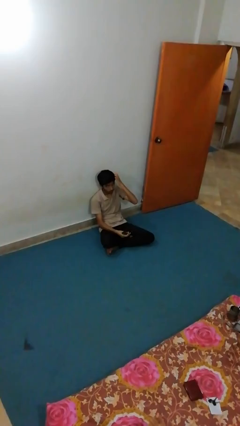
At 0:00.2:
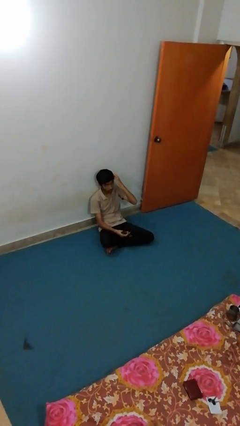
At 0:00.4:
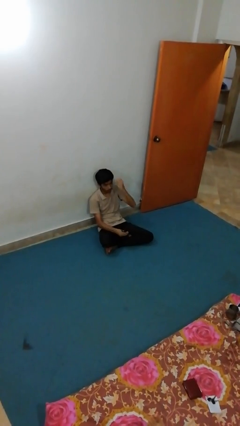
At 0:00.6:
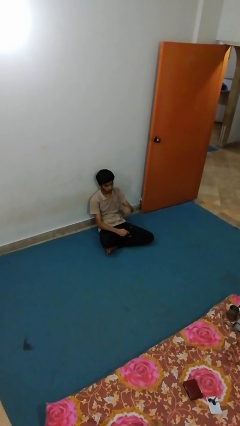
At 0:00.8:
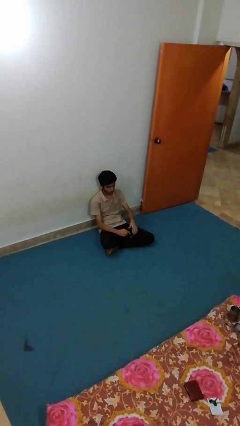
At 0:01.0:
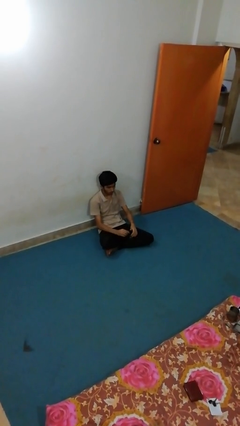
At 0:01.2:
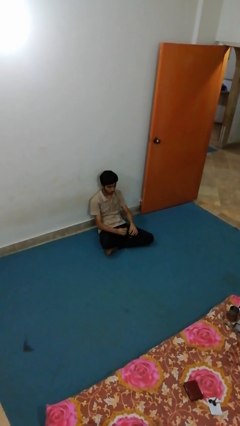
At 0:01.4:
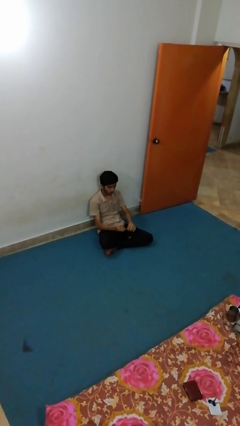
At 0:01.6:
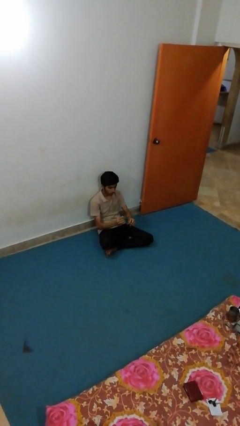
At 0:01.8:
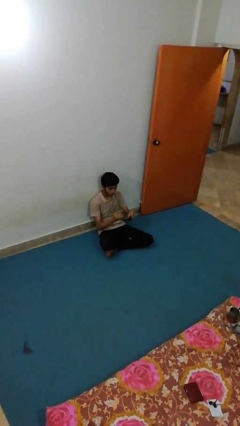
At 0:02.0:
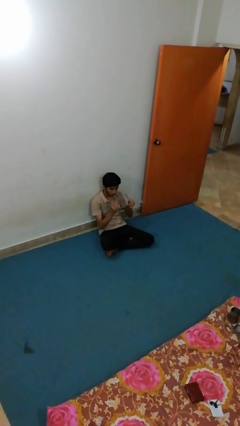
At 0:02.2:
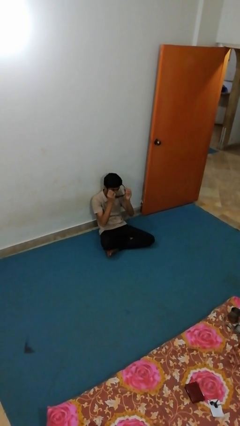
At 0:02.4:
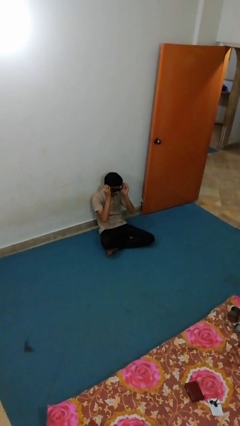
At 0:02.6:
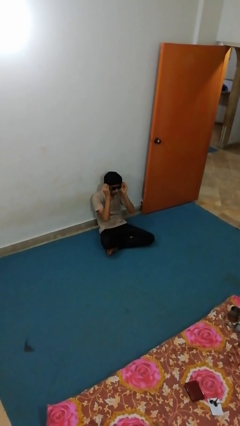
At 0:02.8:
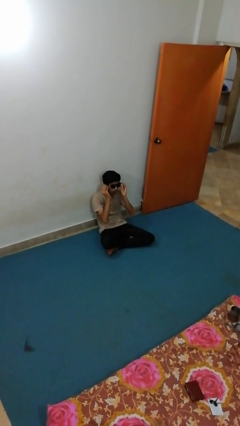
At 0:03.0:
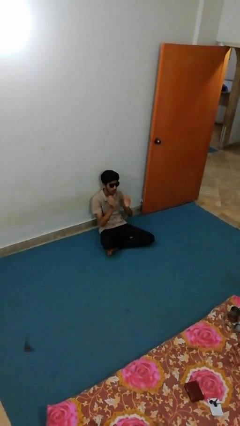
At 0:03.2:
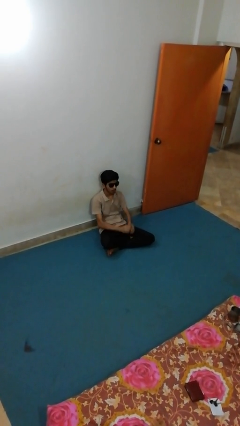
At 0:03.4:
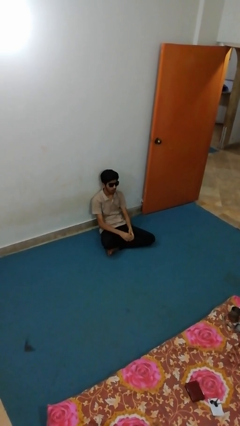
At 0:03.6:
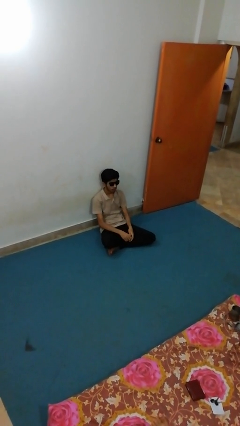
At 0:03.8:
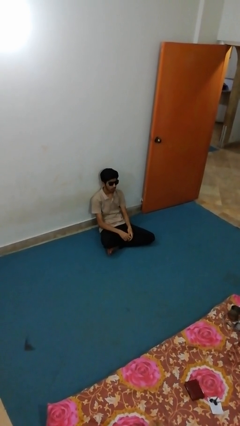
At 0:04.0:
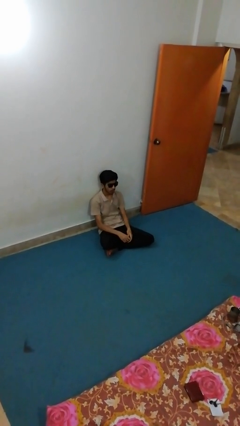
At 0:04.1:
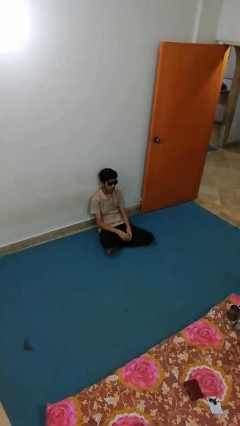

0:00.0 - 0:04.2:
person puts on sunglasses

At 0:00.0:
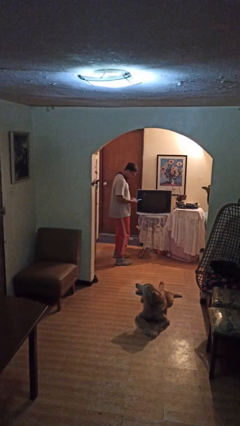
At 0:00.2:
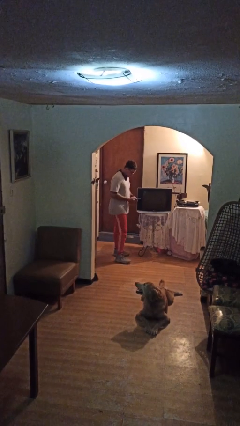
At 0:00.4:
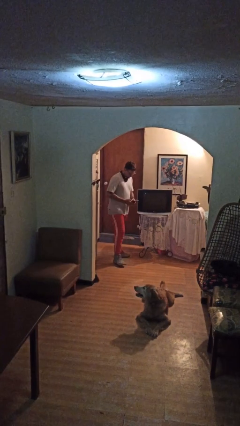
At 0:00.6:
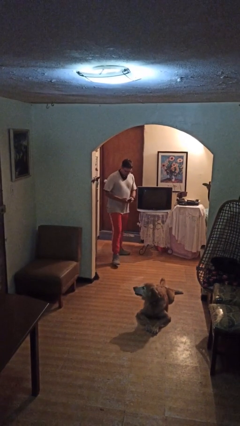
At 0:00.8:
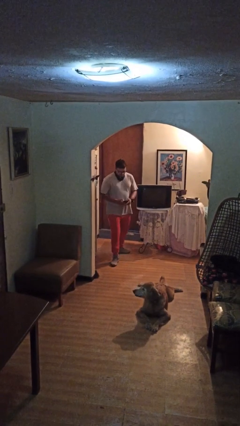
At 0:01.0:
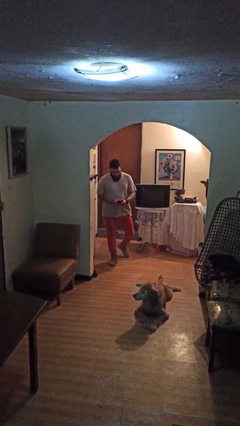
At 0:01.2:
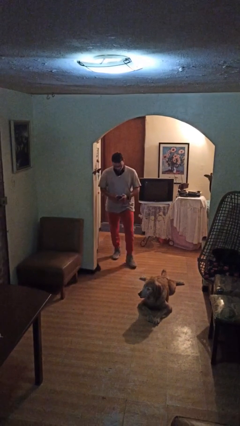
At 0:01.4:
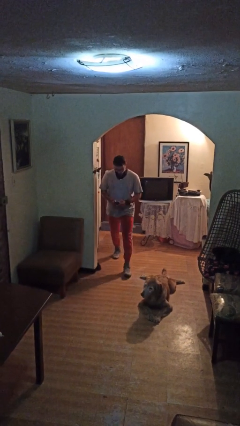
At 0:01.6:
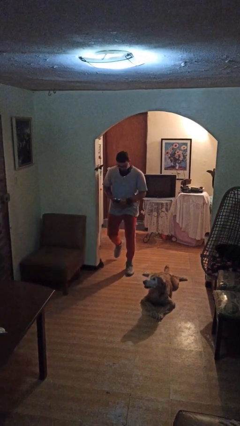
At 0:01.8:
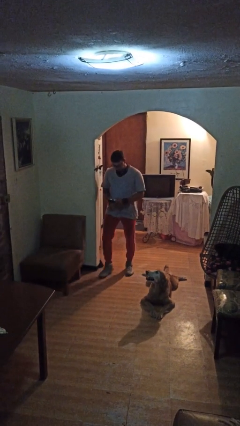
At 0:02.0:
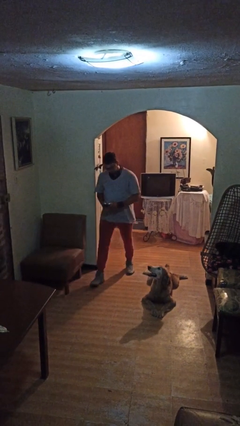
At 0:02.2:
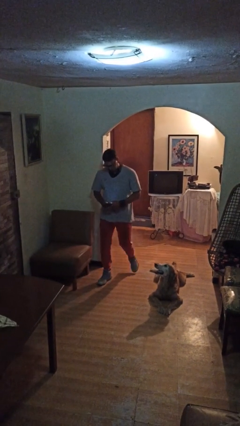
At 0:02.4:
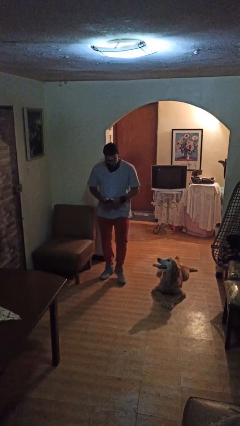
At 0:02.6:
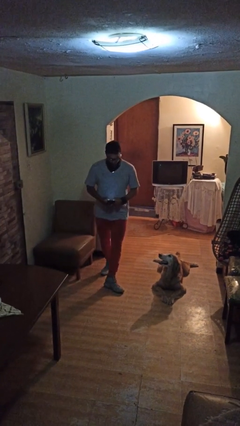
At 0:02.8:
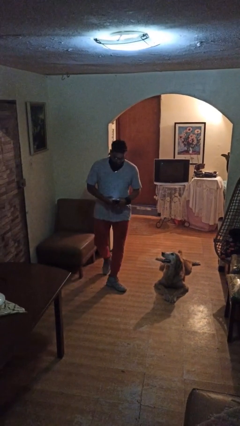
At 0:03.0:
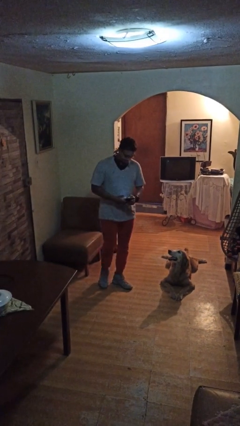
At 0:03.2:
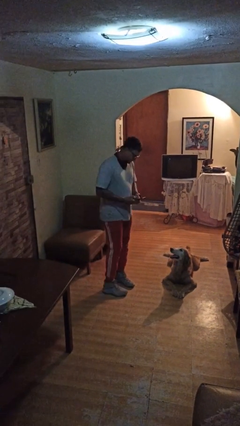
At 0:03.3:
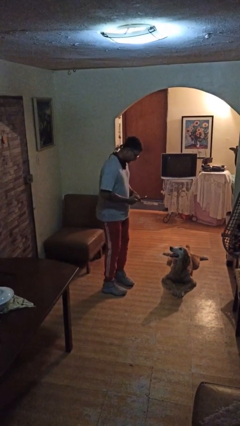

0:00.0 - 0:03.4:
person enters scene through structure

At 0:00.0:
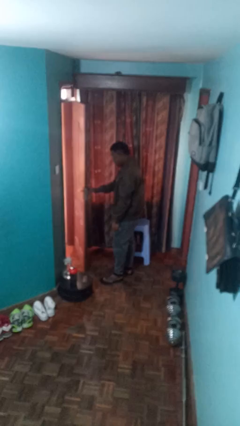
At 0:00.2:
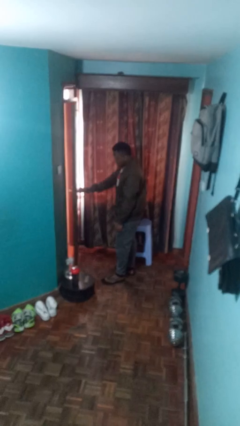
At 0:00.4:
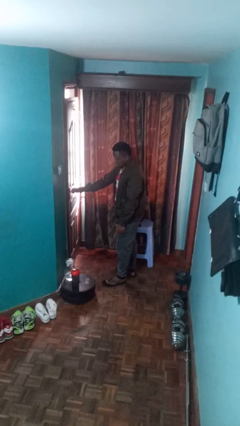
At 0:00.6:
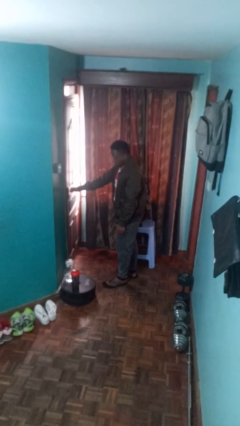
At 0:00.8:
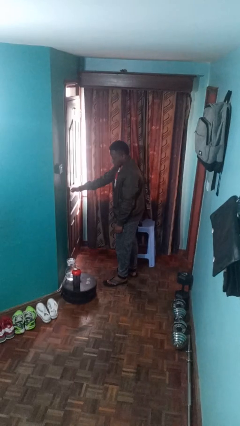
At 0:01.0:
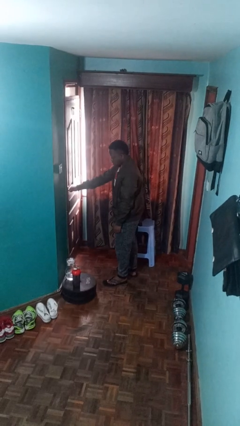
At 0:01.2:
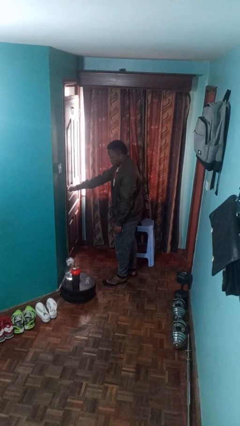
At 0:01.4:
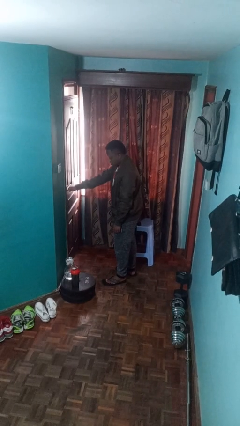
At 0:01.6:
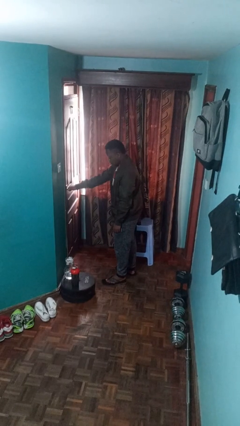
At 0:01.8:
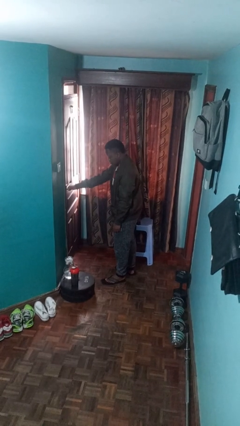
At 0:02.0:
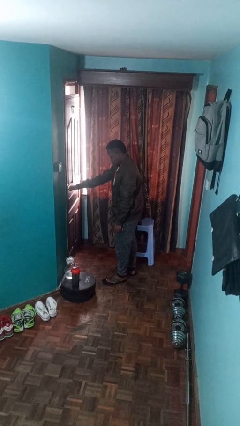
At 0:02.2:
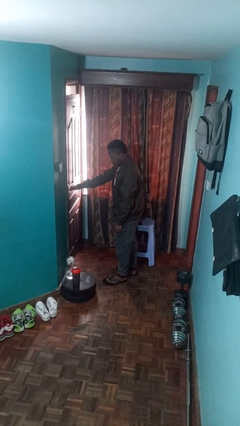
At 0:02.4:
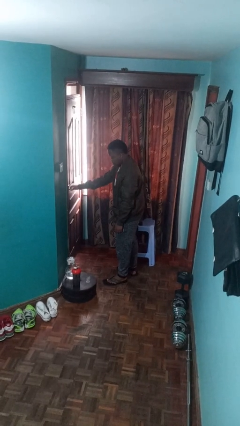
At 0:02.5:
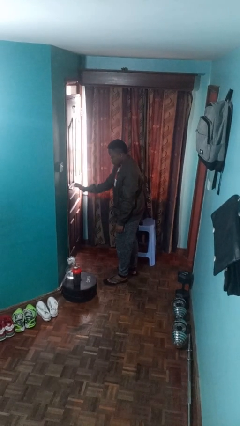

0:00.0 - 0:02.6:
person closes facility door

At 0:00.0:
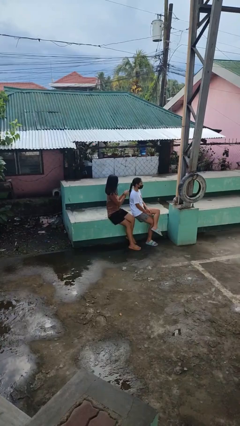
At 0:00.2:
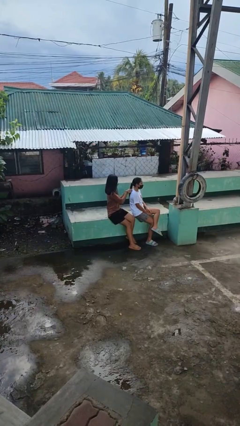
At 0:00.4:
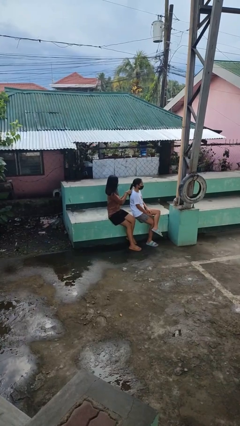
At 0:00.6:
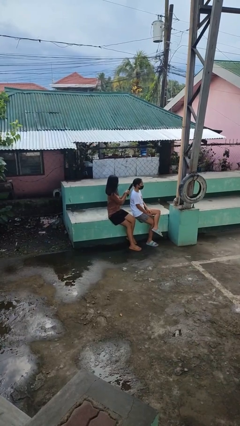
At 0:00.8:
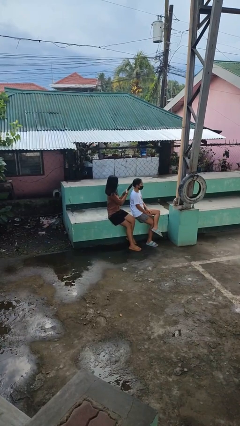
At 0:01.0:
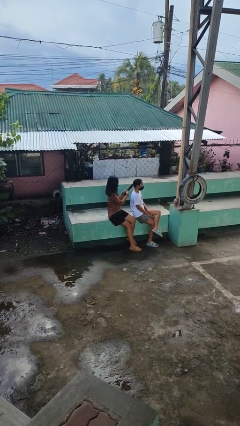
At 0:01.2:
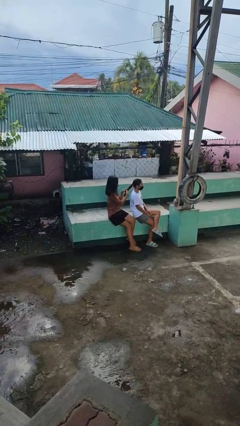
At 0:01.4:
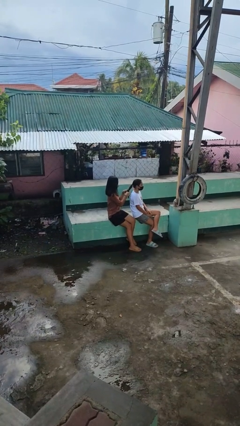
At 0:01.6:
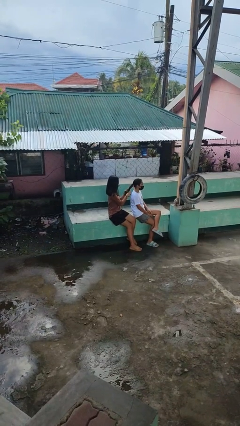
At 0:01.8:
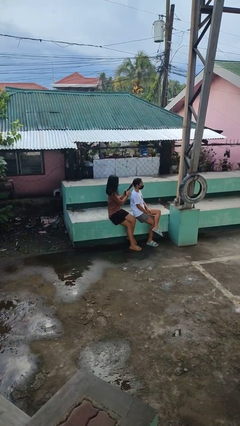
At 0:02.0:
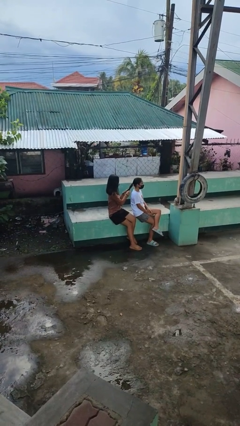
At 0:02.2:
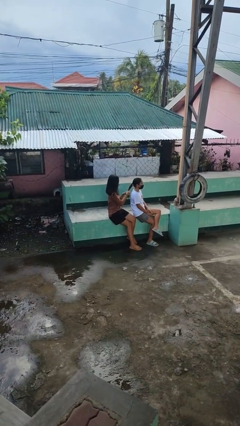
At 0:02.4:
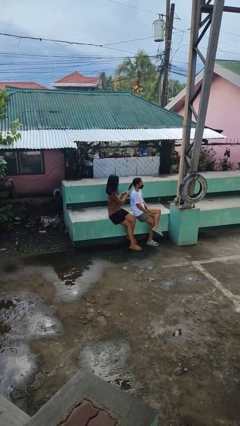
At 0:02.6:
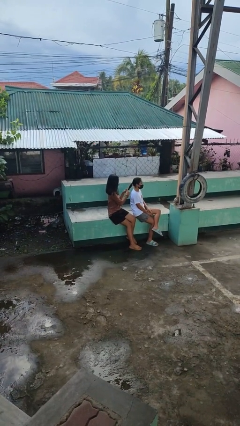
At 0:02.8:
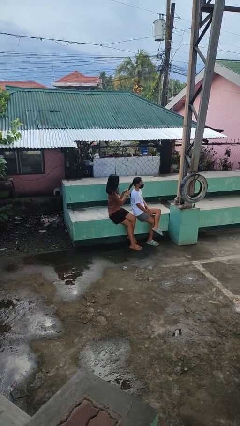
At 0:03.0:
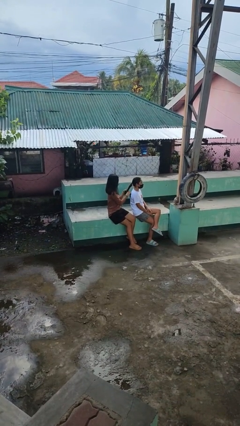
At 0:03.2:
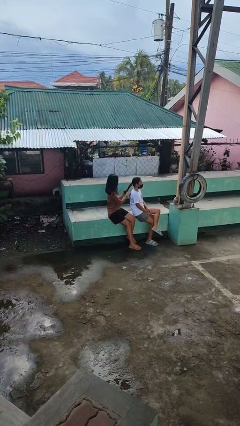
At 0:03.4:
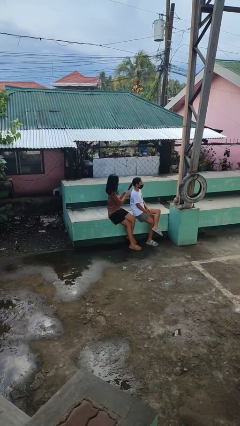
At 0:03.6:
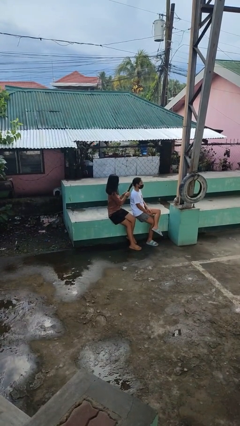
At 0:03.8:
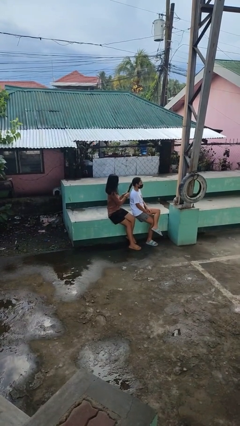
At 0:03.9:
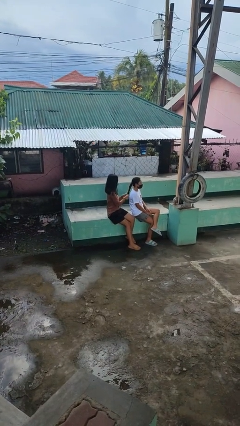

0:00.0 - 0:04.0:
person braids hair of person

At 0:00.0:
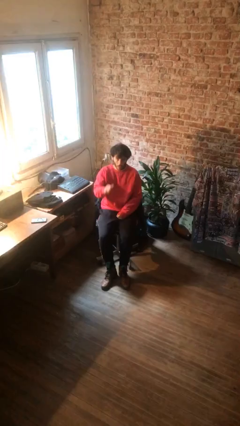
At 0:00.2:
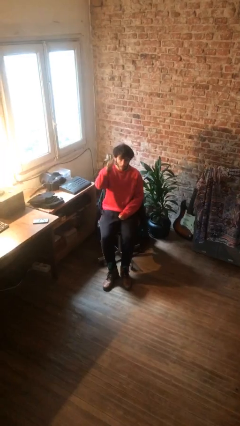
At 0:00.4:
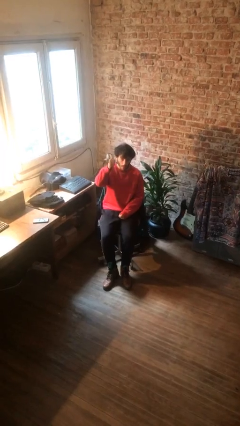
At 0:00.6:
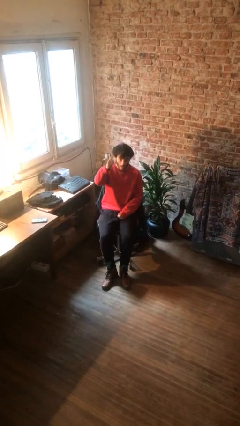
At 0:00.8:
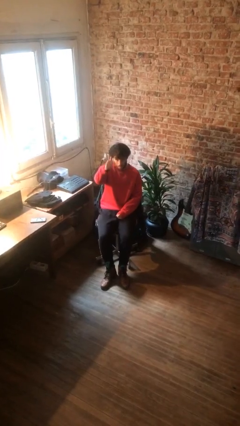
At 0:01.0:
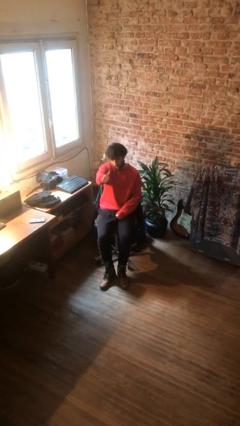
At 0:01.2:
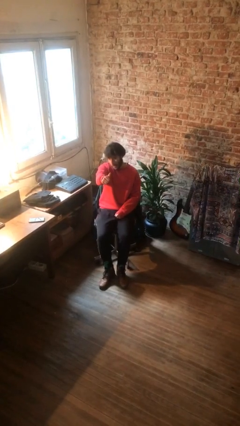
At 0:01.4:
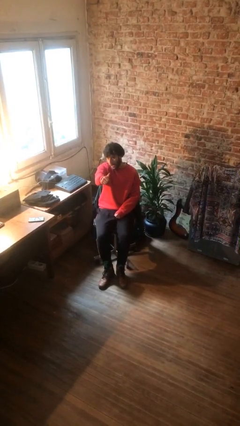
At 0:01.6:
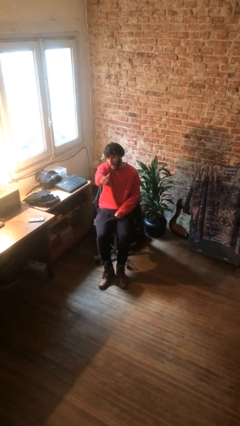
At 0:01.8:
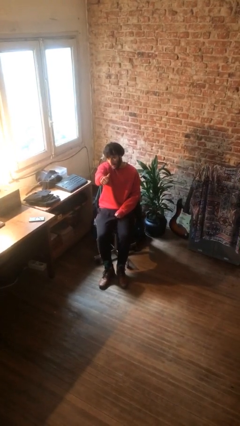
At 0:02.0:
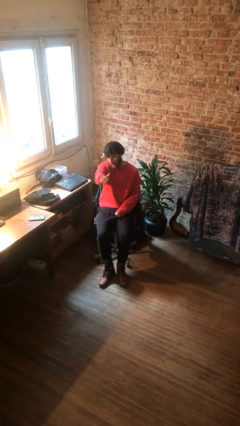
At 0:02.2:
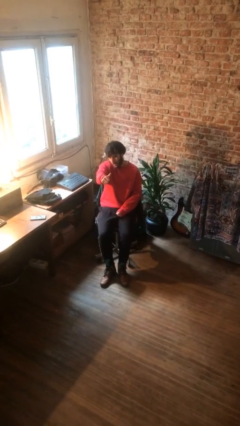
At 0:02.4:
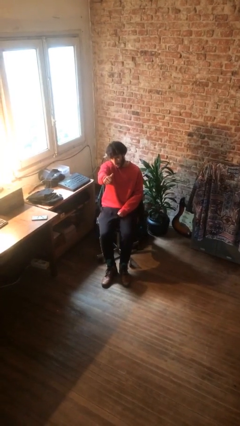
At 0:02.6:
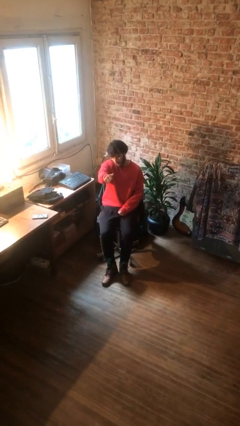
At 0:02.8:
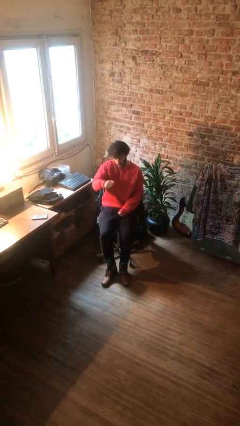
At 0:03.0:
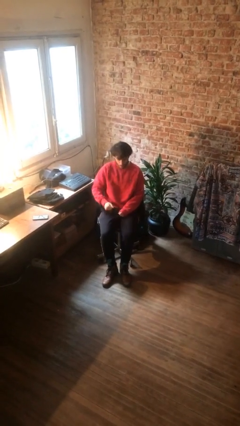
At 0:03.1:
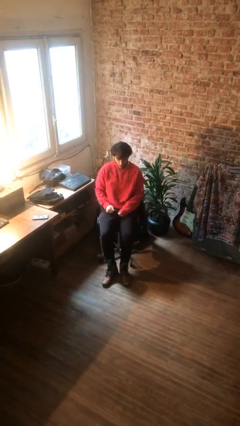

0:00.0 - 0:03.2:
person gestures thumbs up
